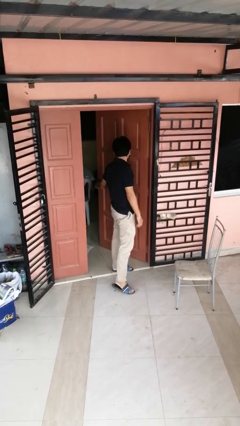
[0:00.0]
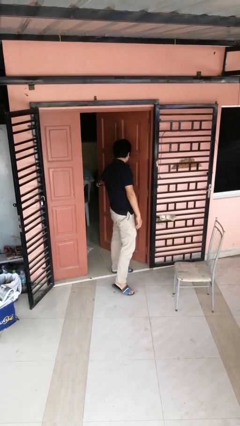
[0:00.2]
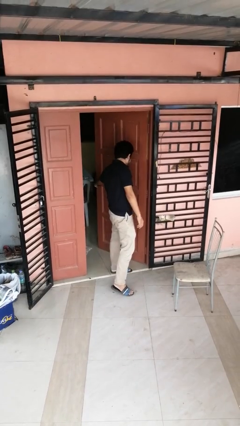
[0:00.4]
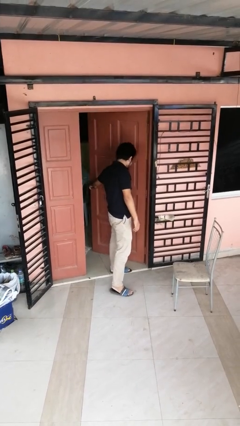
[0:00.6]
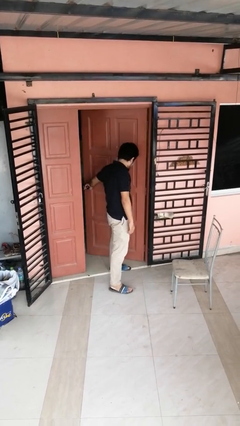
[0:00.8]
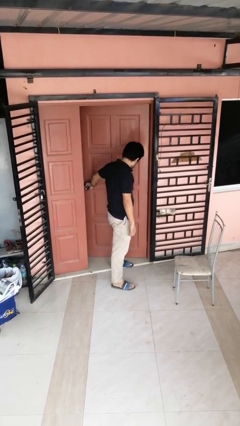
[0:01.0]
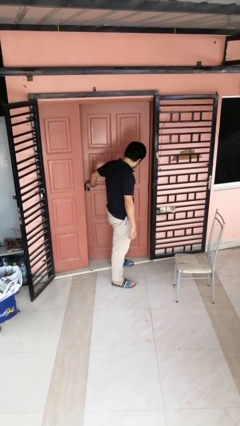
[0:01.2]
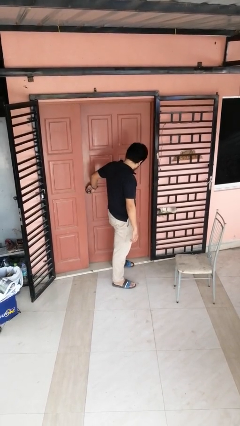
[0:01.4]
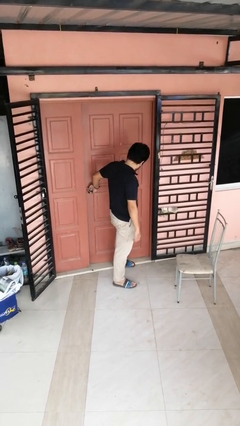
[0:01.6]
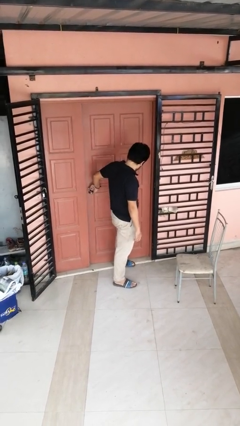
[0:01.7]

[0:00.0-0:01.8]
person closes door with hip

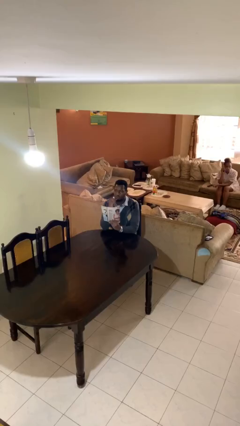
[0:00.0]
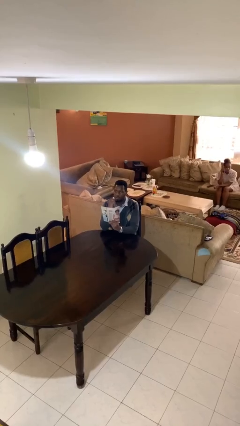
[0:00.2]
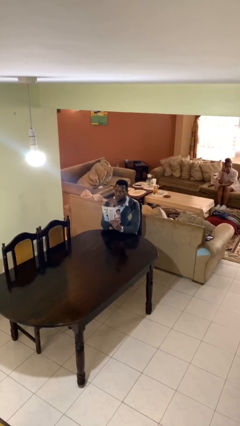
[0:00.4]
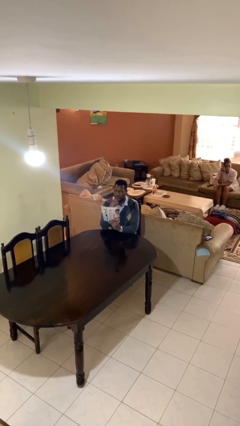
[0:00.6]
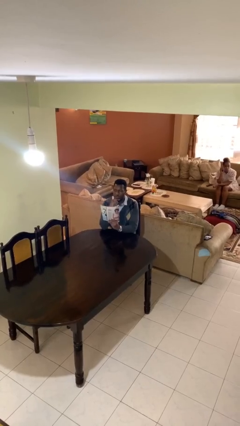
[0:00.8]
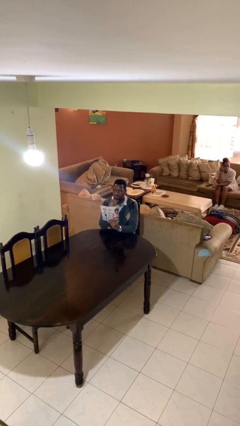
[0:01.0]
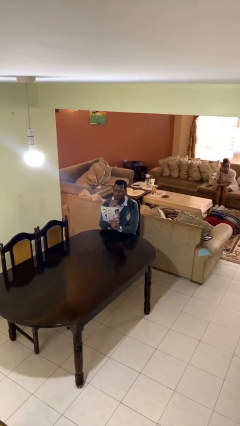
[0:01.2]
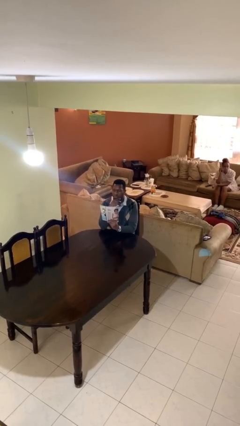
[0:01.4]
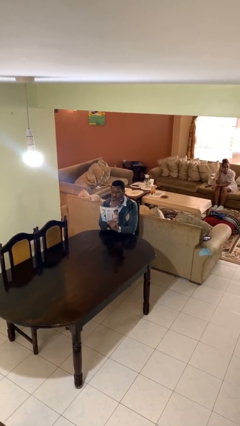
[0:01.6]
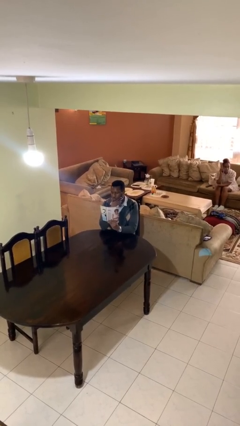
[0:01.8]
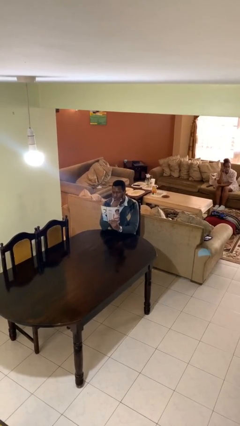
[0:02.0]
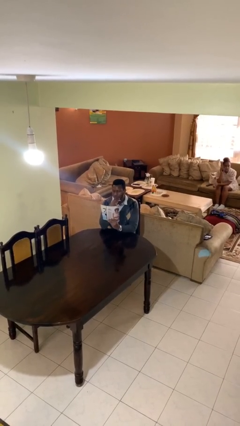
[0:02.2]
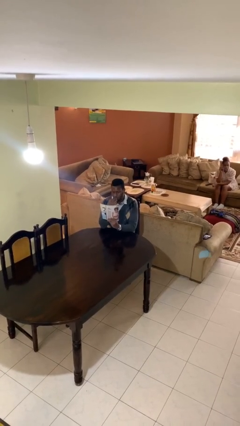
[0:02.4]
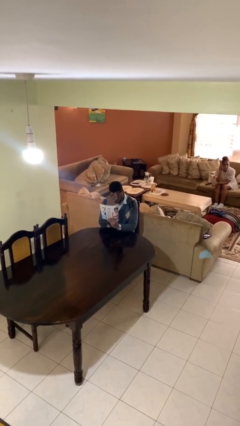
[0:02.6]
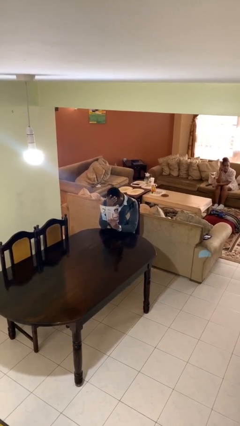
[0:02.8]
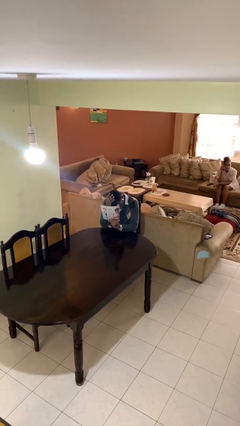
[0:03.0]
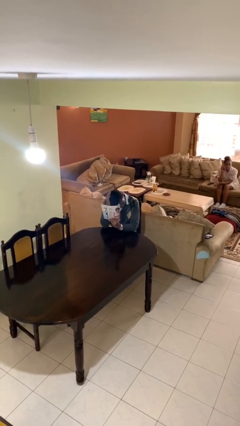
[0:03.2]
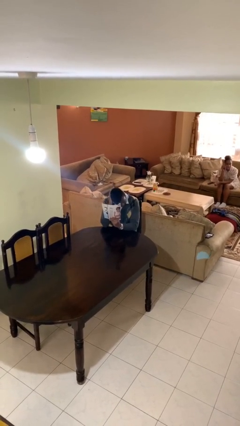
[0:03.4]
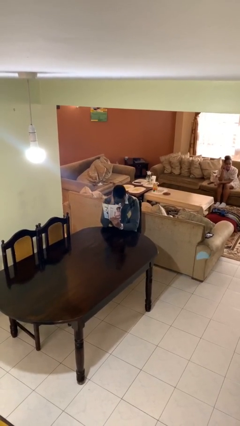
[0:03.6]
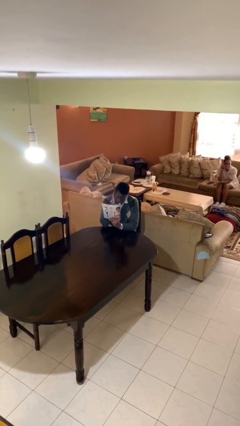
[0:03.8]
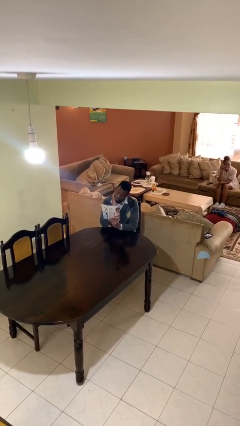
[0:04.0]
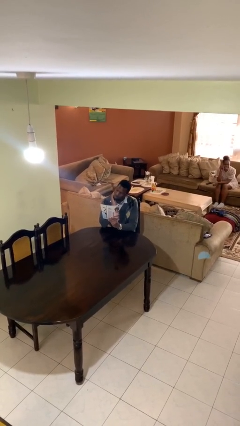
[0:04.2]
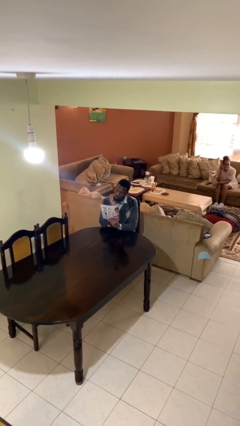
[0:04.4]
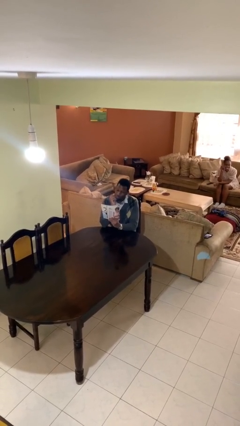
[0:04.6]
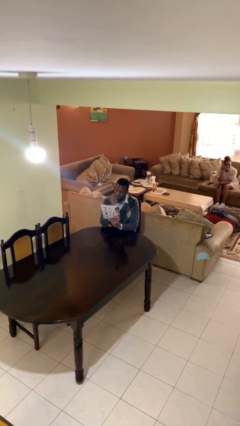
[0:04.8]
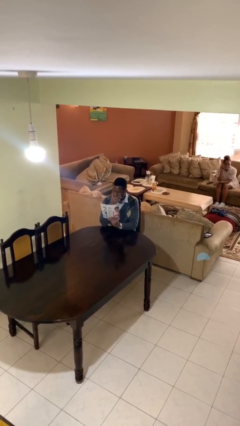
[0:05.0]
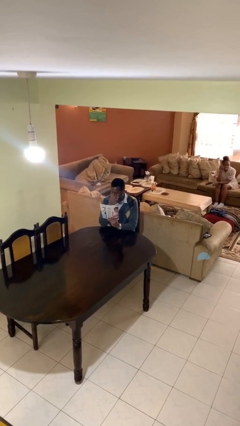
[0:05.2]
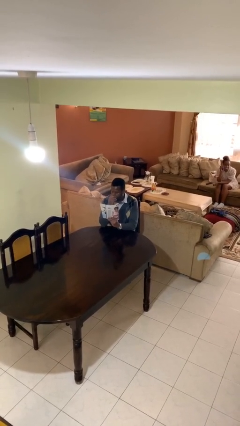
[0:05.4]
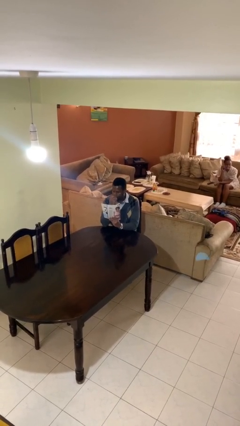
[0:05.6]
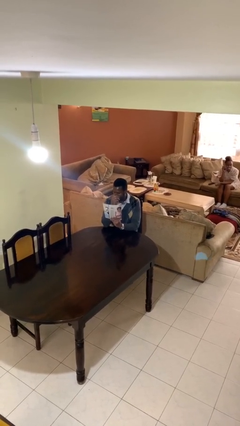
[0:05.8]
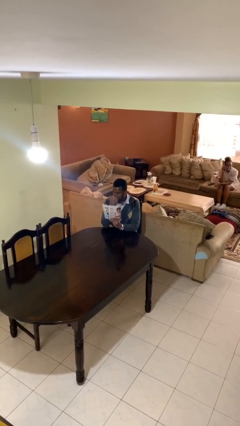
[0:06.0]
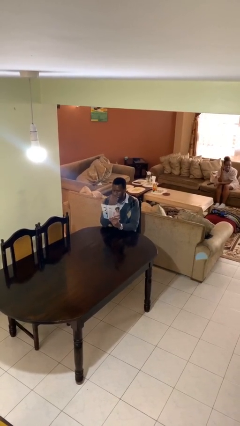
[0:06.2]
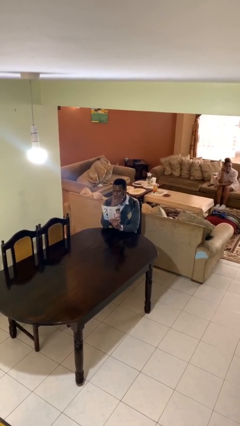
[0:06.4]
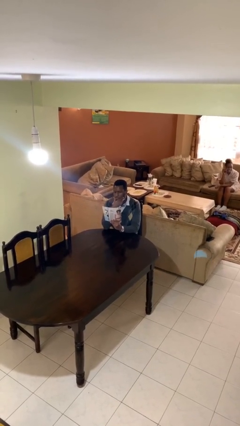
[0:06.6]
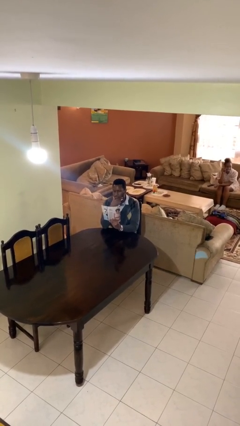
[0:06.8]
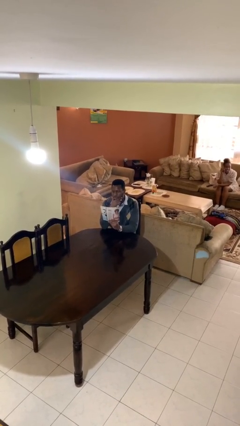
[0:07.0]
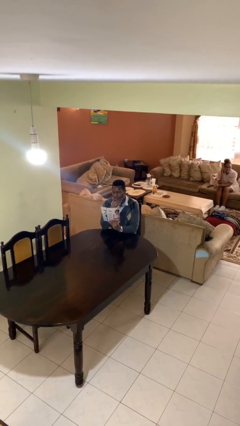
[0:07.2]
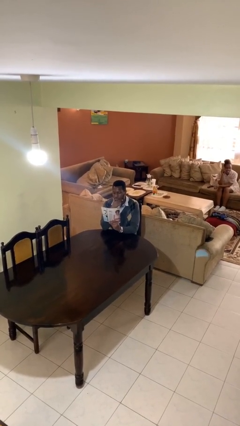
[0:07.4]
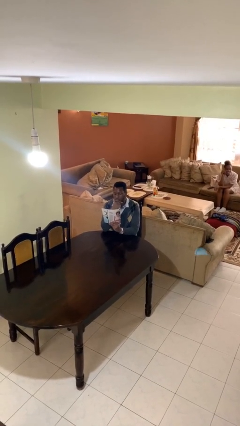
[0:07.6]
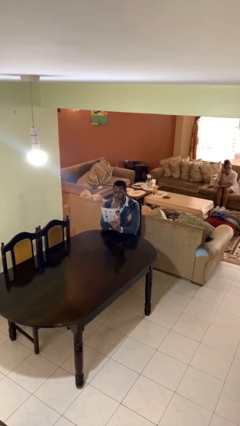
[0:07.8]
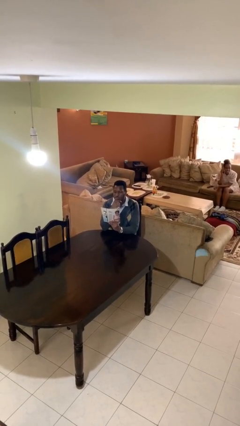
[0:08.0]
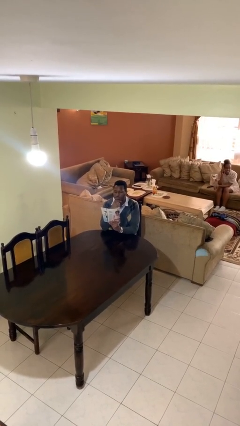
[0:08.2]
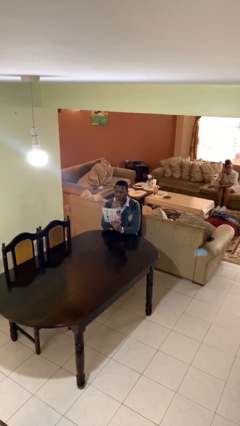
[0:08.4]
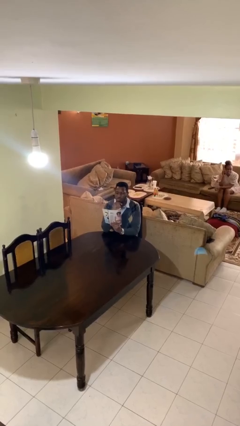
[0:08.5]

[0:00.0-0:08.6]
person reads document

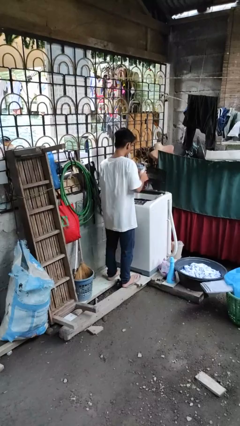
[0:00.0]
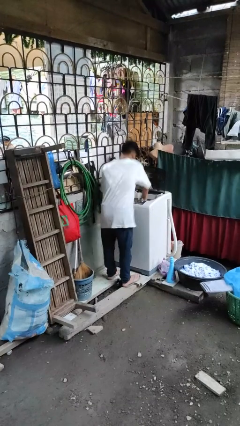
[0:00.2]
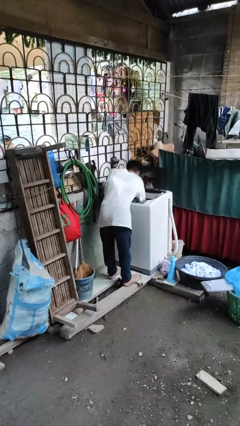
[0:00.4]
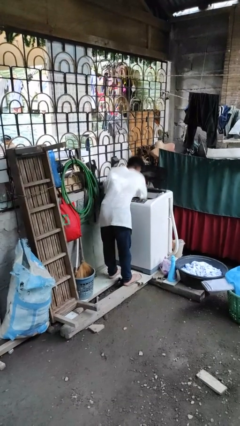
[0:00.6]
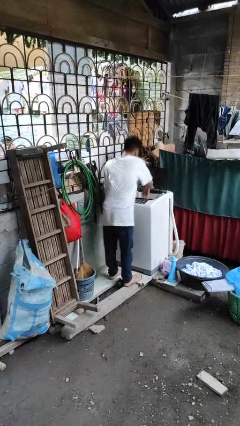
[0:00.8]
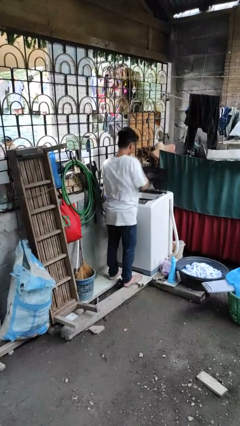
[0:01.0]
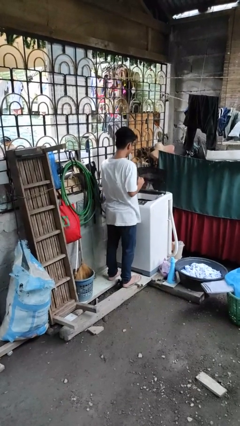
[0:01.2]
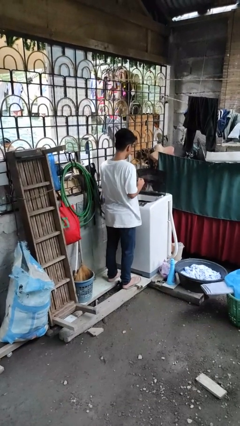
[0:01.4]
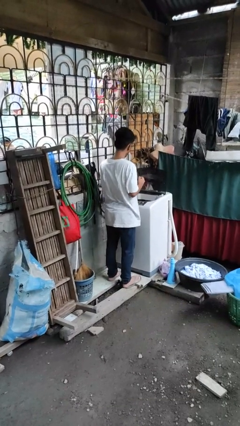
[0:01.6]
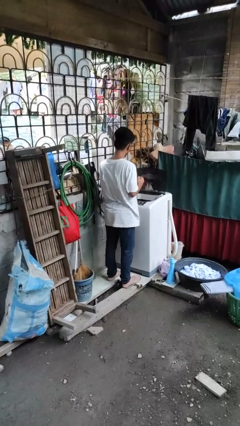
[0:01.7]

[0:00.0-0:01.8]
person loads dryer

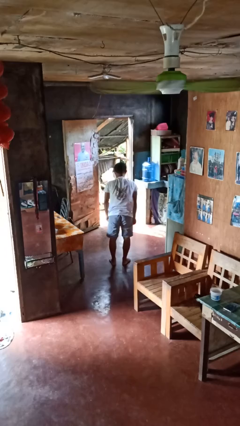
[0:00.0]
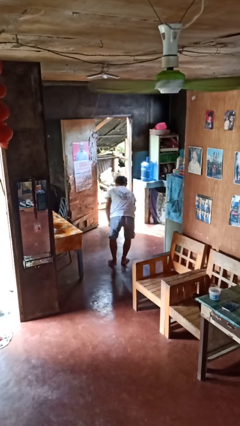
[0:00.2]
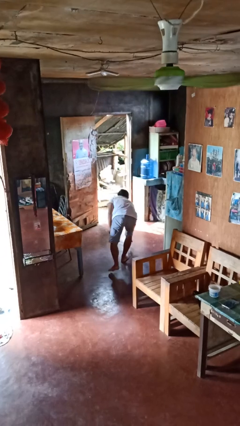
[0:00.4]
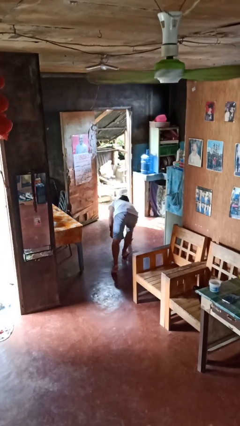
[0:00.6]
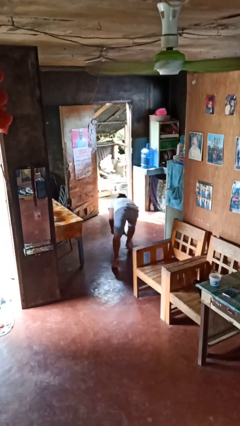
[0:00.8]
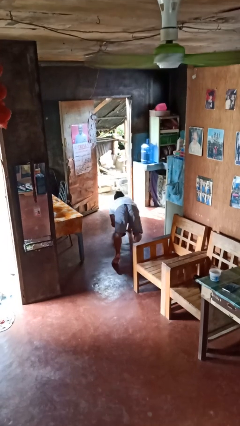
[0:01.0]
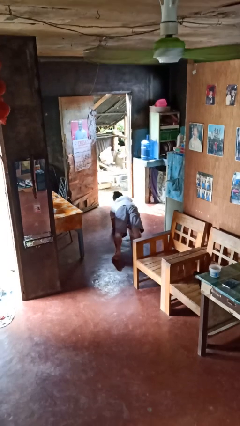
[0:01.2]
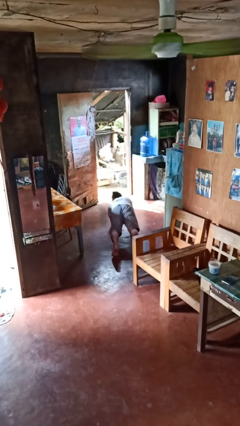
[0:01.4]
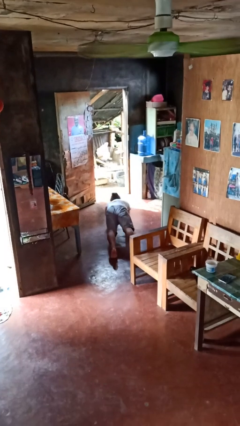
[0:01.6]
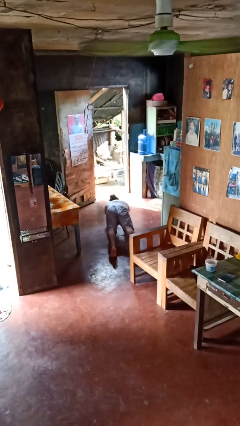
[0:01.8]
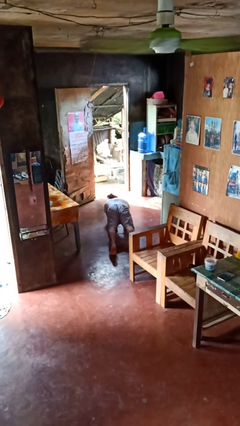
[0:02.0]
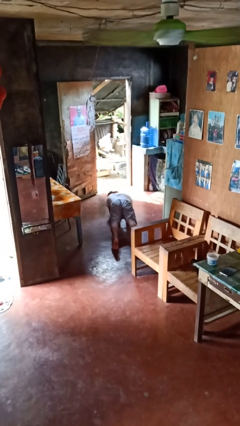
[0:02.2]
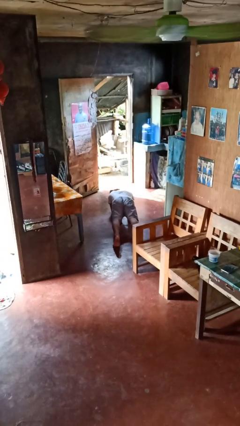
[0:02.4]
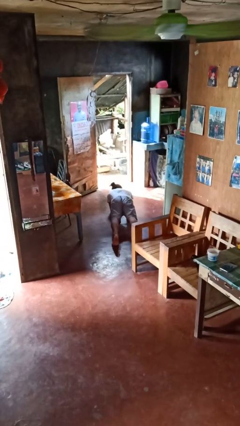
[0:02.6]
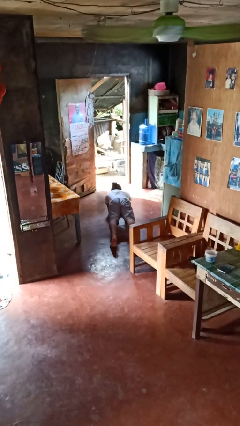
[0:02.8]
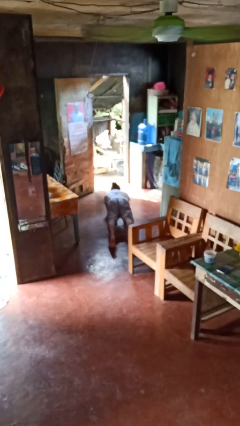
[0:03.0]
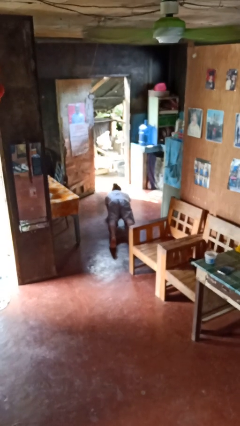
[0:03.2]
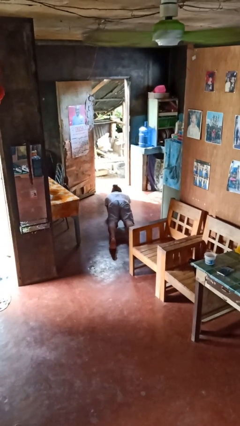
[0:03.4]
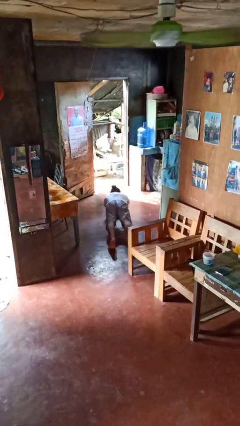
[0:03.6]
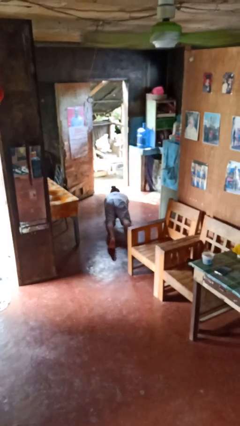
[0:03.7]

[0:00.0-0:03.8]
person exercises with plank

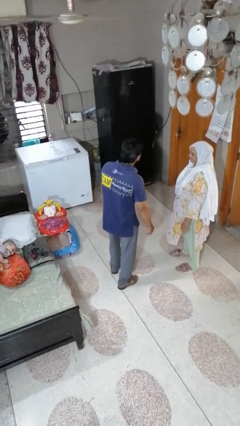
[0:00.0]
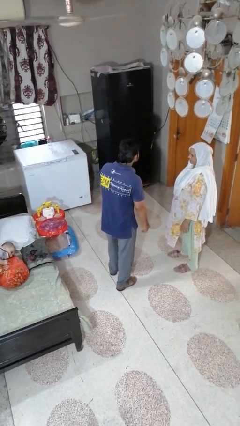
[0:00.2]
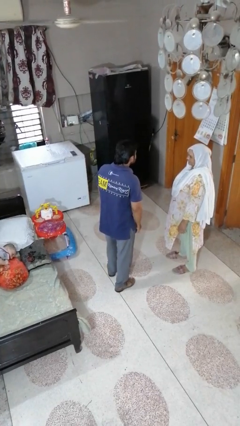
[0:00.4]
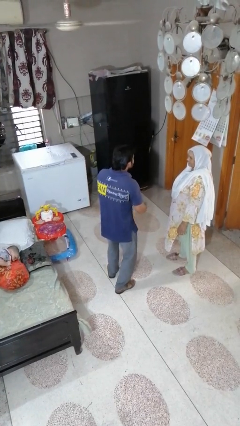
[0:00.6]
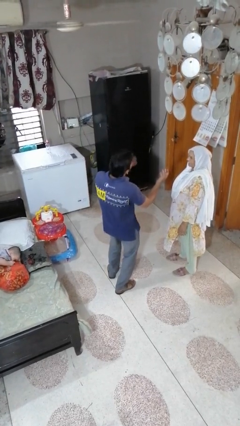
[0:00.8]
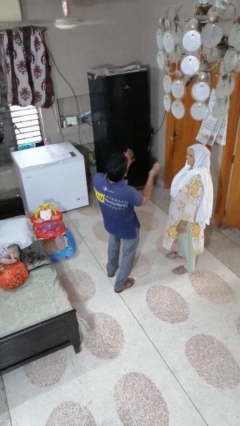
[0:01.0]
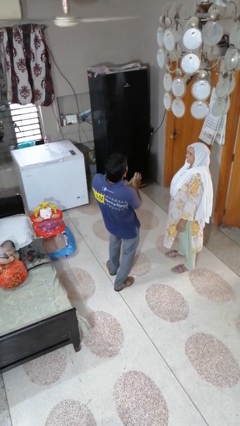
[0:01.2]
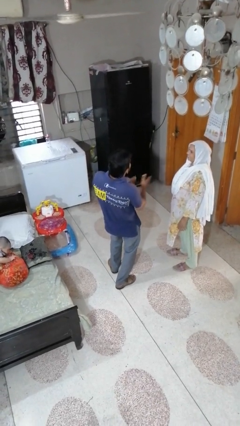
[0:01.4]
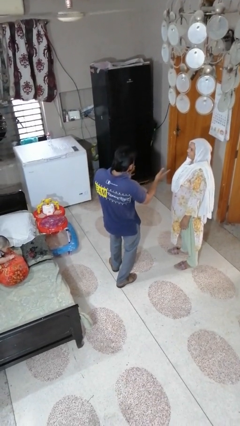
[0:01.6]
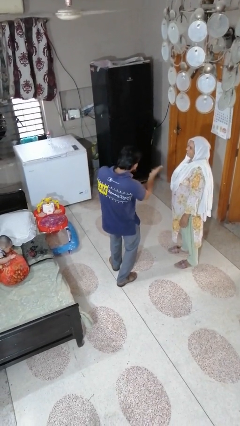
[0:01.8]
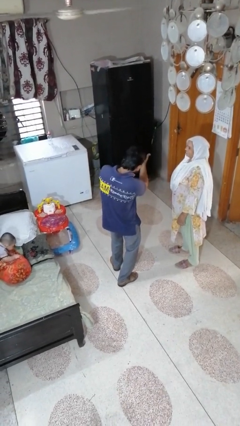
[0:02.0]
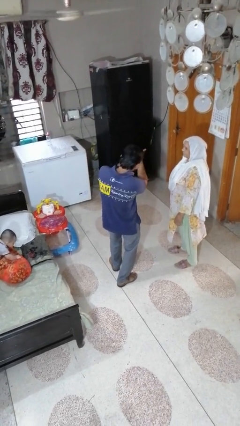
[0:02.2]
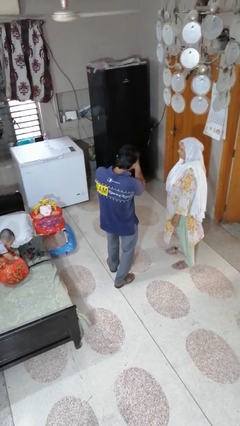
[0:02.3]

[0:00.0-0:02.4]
person laughs with person
